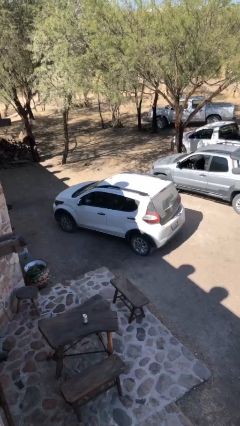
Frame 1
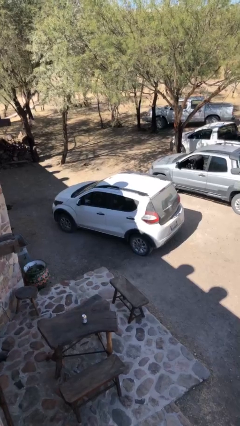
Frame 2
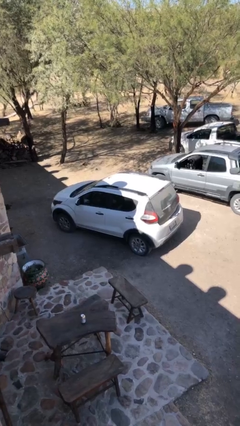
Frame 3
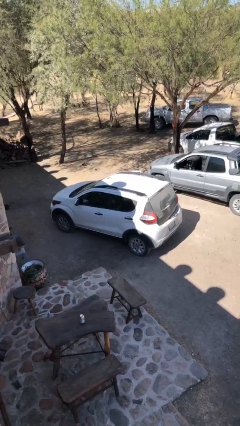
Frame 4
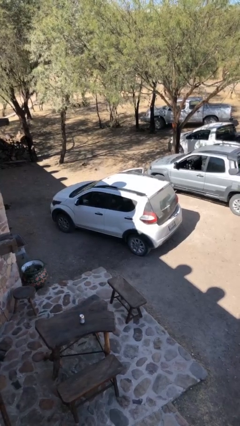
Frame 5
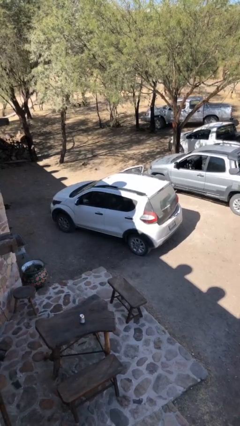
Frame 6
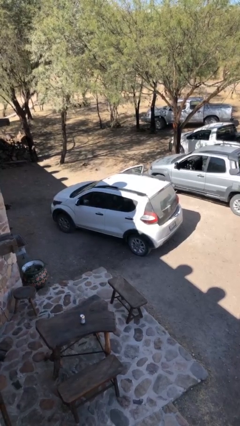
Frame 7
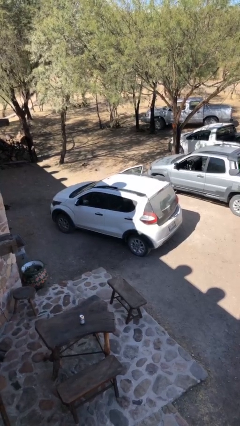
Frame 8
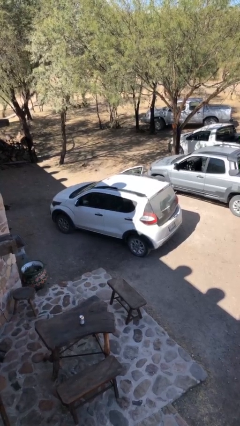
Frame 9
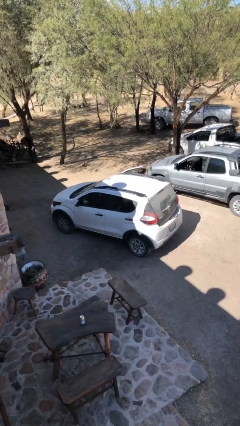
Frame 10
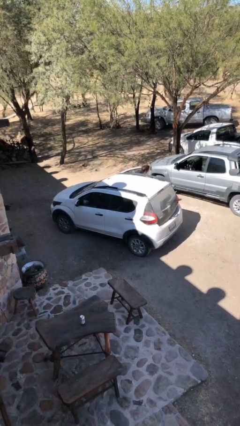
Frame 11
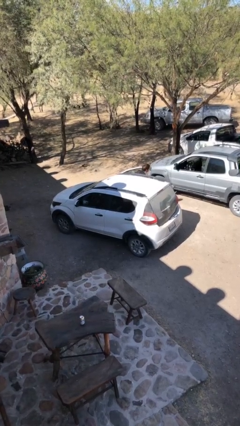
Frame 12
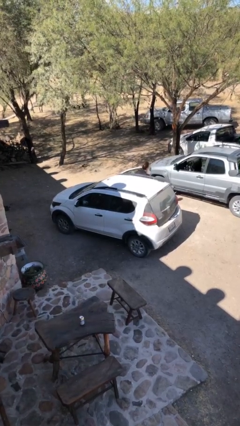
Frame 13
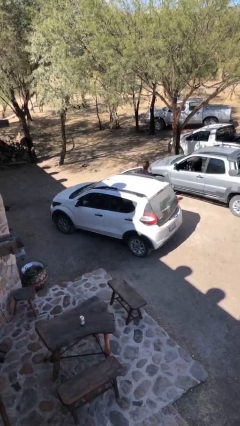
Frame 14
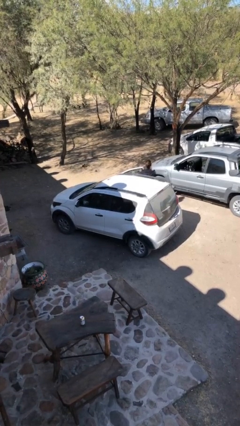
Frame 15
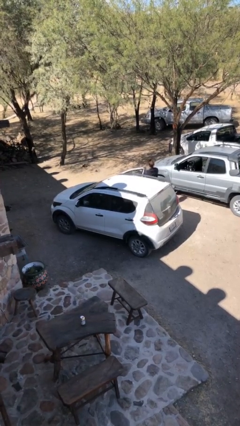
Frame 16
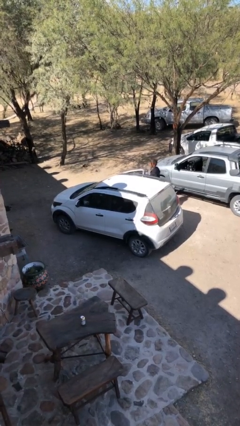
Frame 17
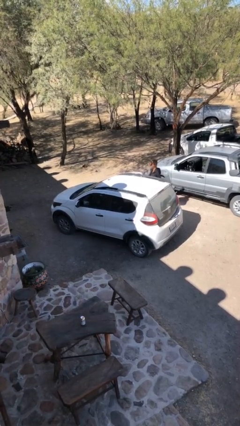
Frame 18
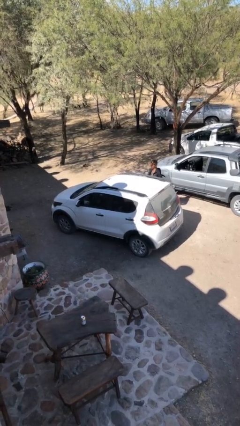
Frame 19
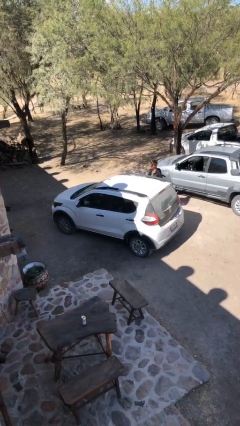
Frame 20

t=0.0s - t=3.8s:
car drops off person

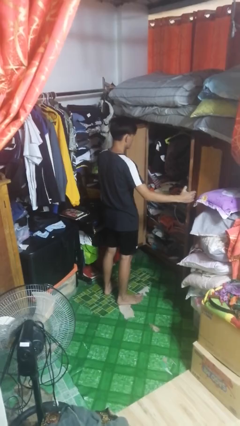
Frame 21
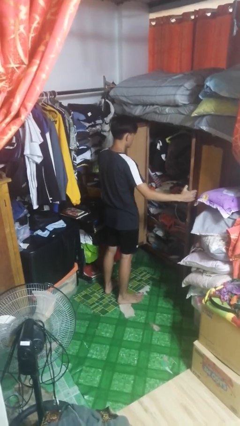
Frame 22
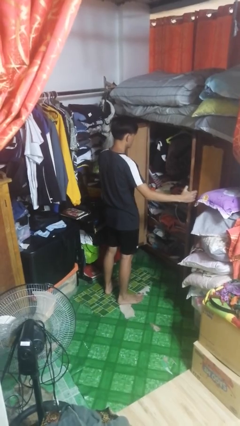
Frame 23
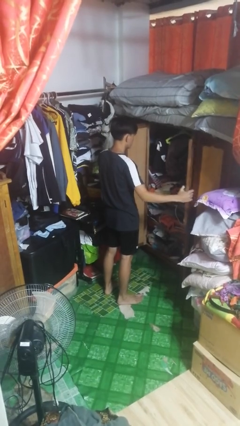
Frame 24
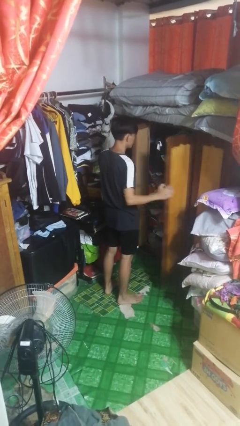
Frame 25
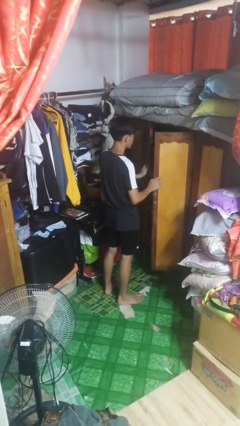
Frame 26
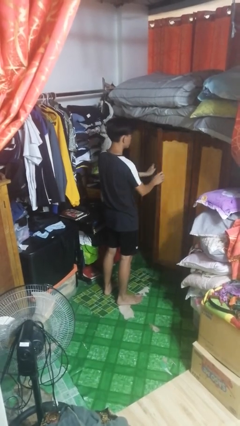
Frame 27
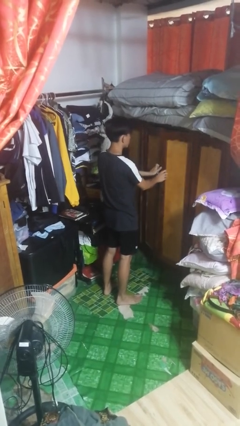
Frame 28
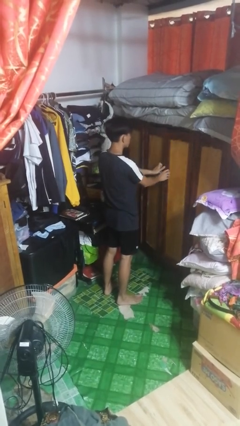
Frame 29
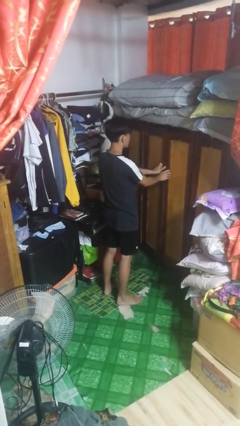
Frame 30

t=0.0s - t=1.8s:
person closes dresser drawer

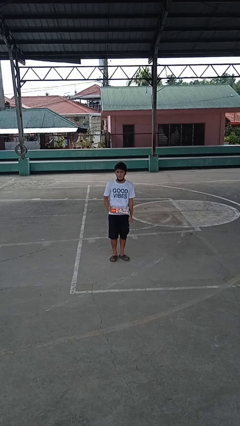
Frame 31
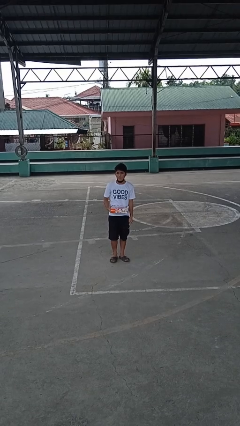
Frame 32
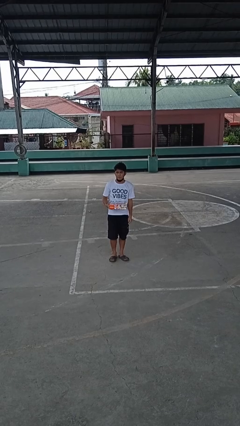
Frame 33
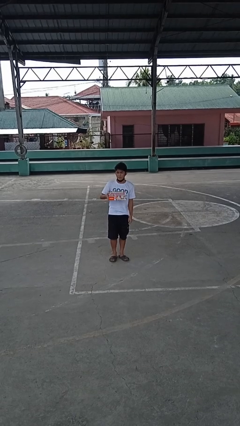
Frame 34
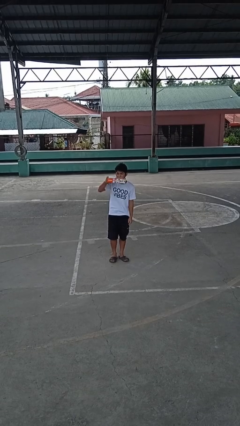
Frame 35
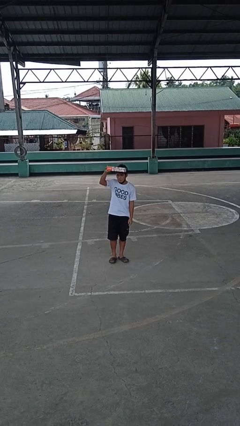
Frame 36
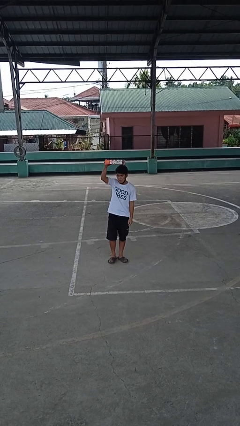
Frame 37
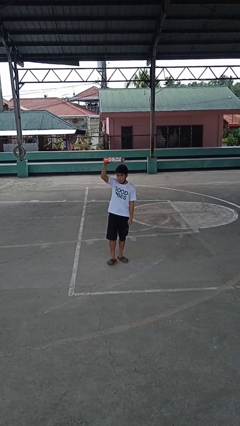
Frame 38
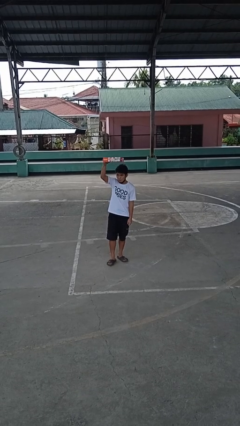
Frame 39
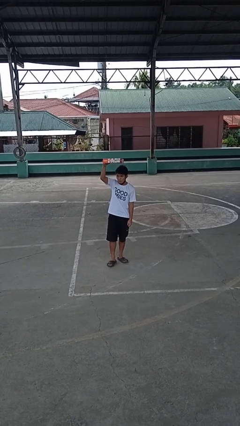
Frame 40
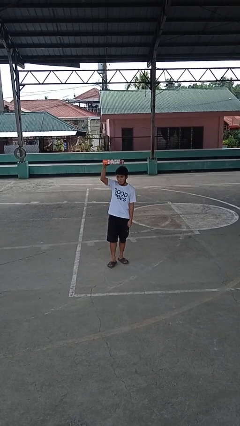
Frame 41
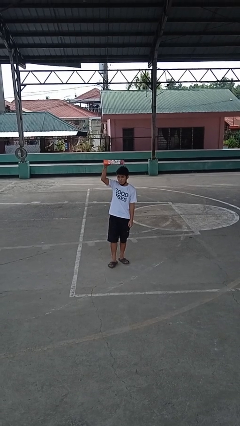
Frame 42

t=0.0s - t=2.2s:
person holds object above head

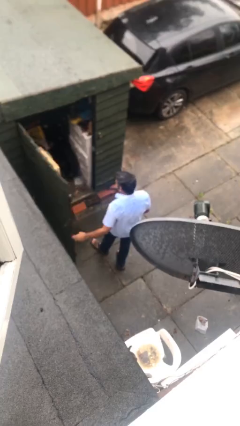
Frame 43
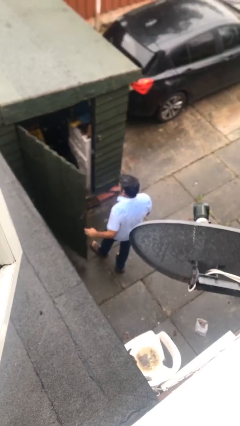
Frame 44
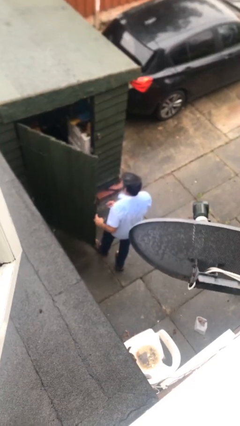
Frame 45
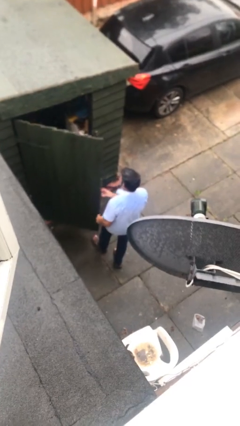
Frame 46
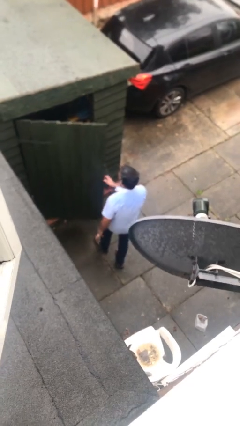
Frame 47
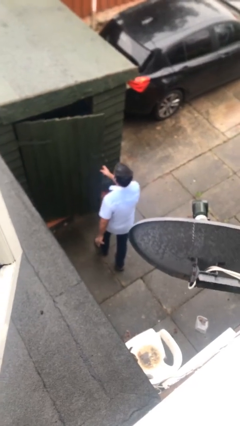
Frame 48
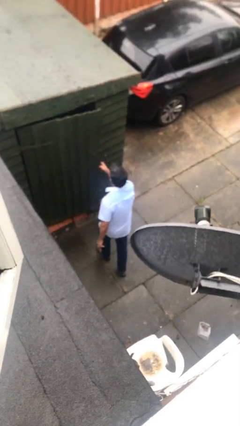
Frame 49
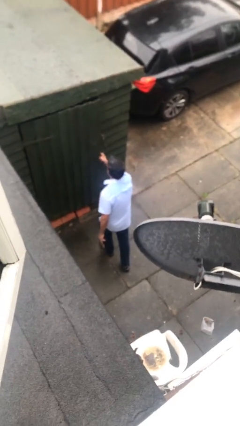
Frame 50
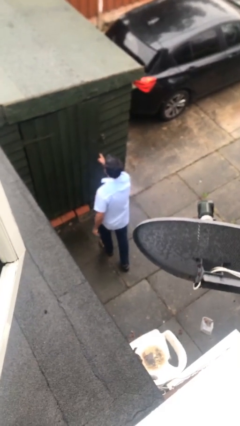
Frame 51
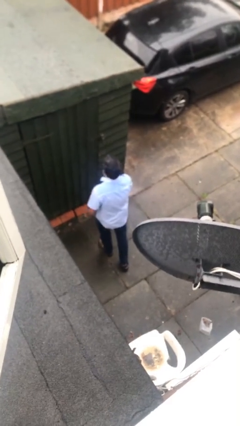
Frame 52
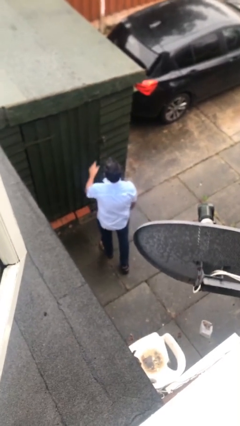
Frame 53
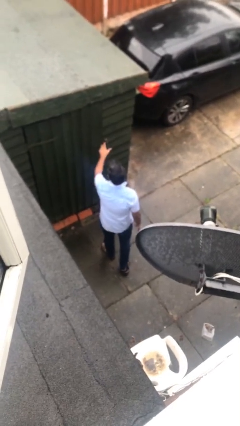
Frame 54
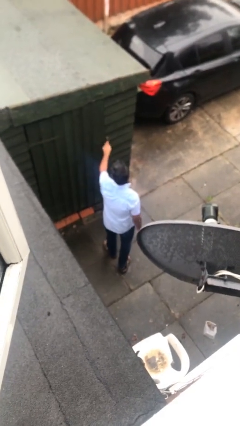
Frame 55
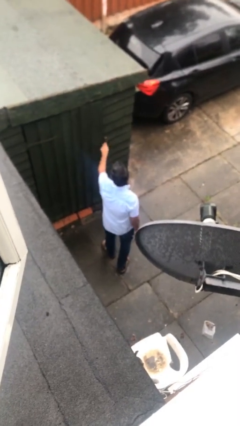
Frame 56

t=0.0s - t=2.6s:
person closes facility door

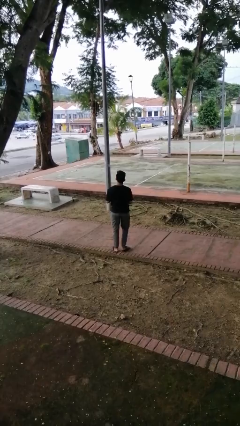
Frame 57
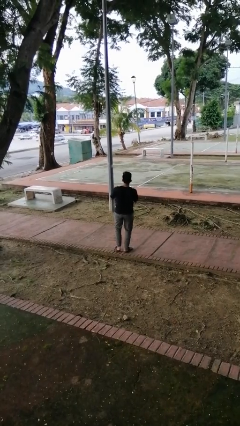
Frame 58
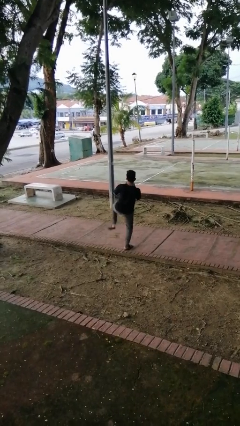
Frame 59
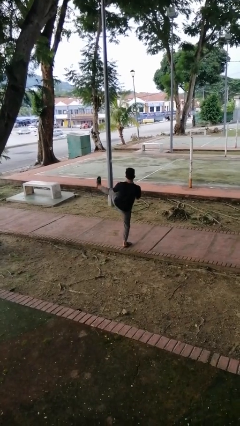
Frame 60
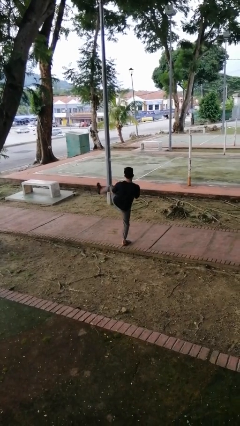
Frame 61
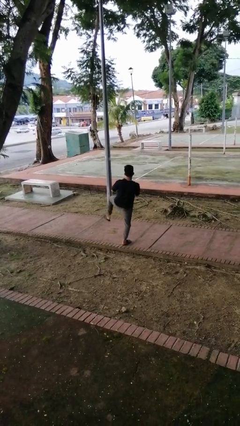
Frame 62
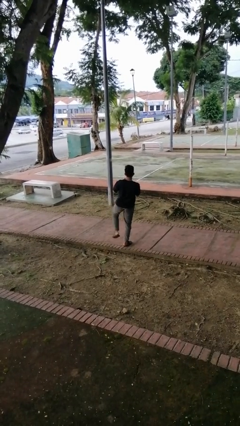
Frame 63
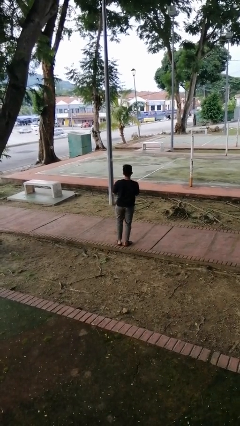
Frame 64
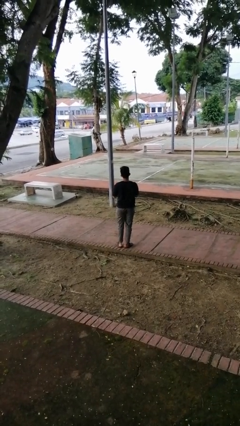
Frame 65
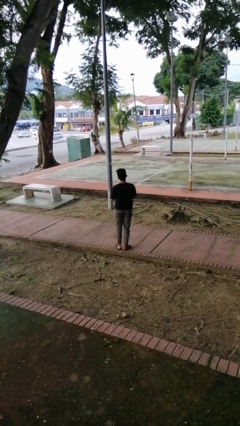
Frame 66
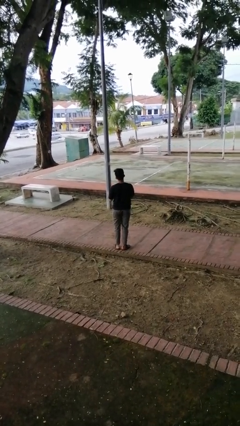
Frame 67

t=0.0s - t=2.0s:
person karate kicks

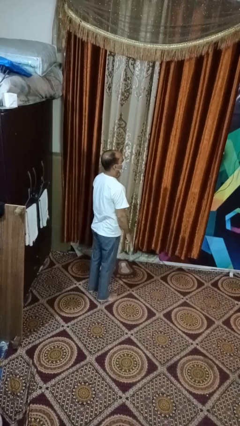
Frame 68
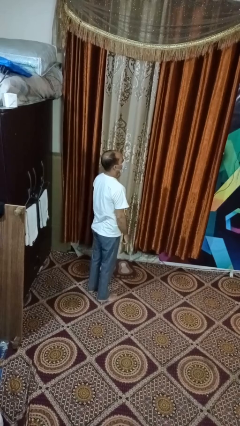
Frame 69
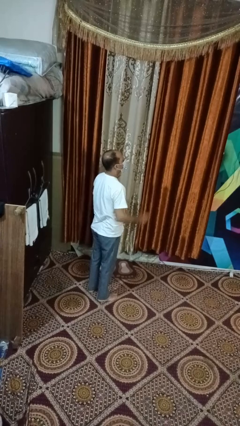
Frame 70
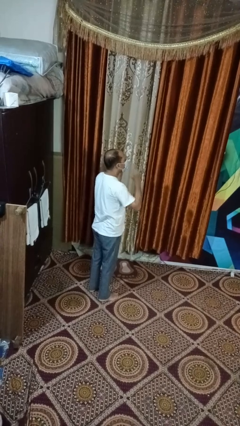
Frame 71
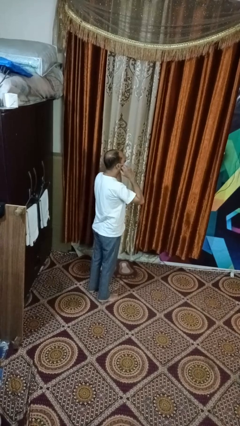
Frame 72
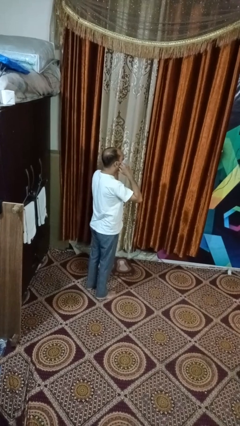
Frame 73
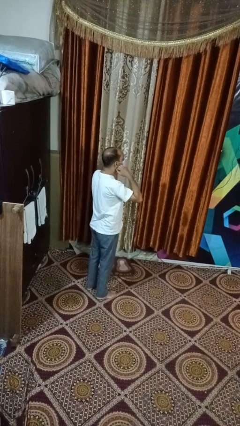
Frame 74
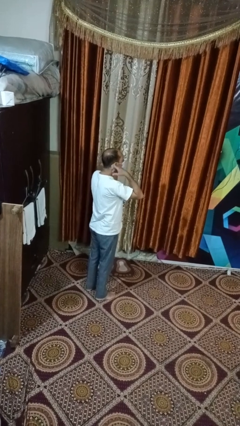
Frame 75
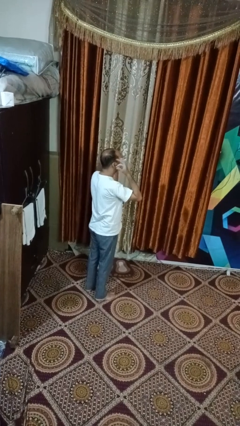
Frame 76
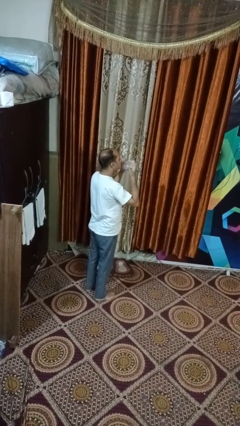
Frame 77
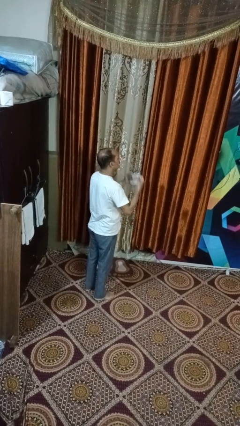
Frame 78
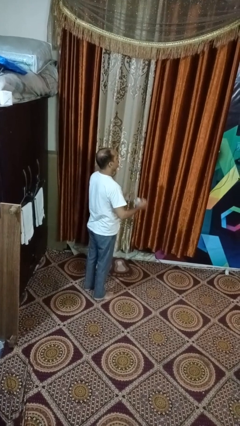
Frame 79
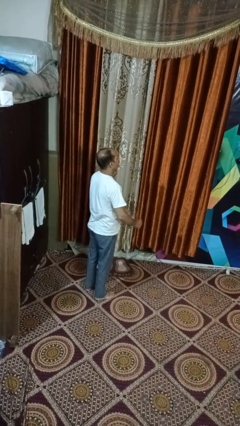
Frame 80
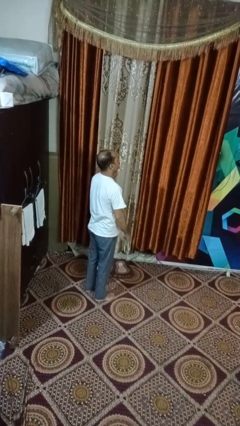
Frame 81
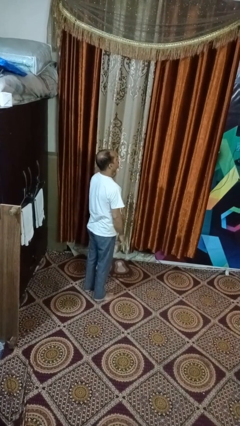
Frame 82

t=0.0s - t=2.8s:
person takes off facemask

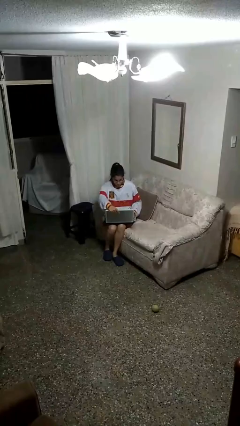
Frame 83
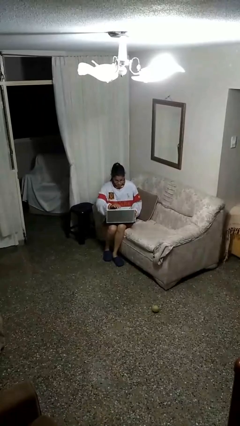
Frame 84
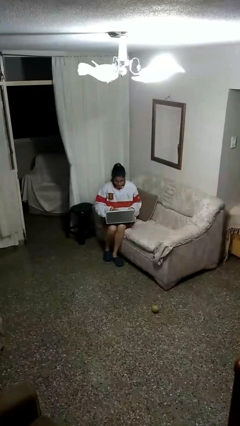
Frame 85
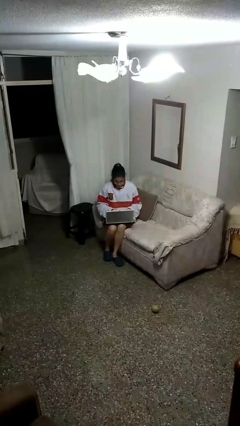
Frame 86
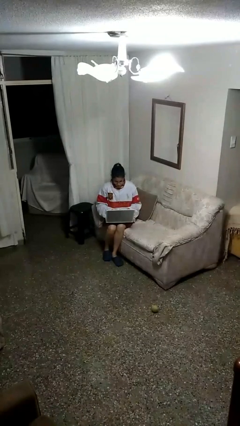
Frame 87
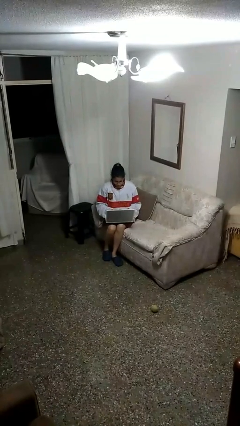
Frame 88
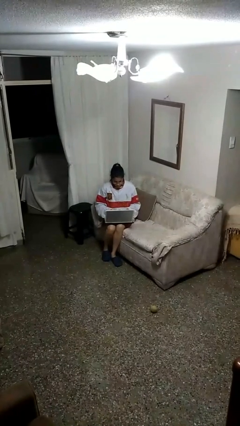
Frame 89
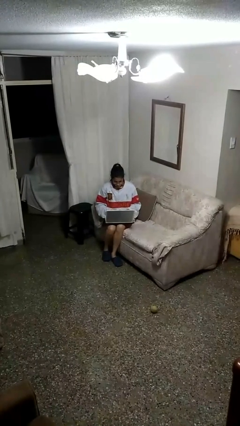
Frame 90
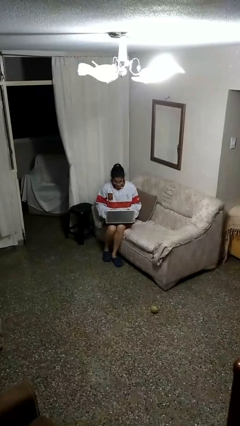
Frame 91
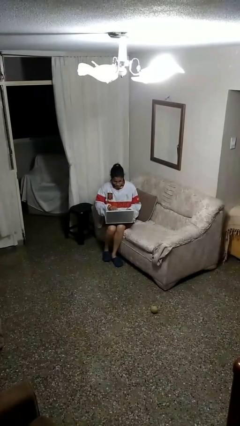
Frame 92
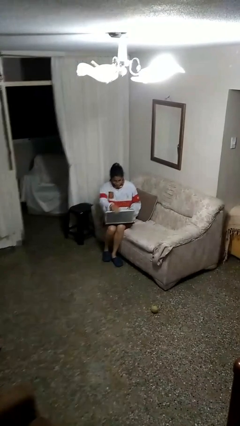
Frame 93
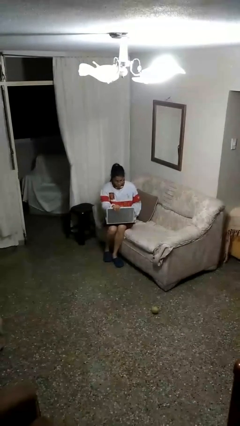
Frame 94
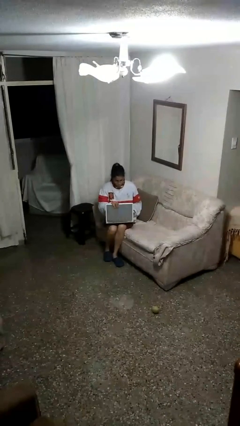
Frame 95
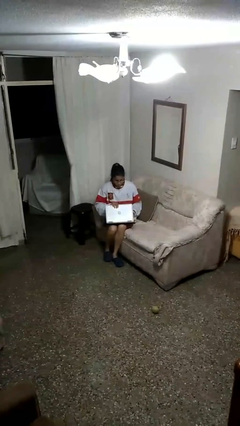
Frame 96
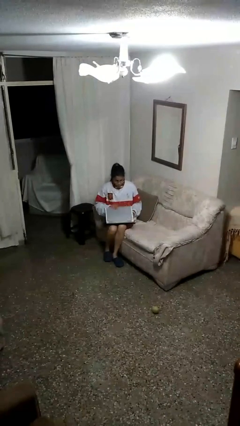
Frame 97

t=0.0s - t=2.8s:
person interacts with laptop
